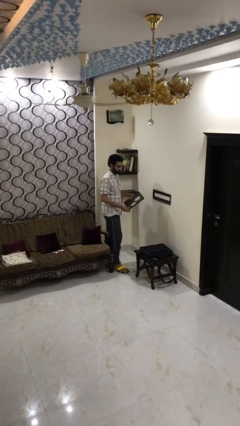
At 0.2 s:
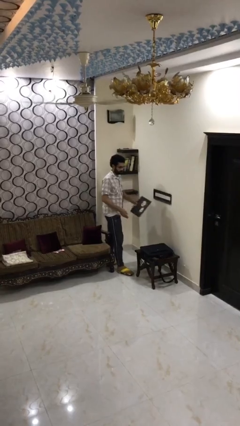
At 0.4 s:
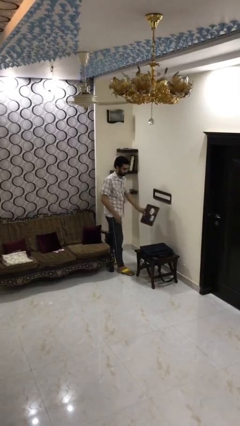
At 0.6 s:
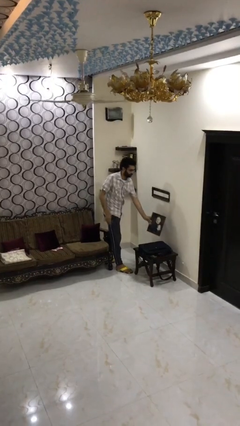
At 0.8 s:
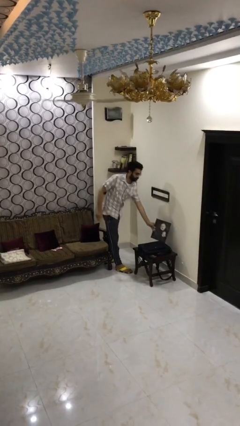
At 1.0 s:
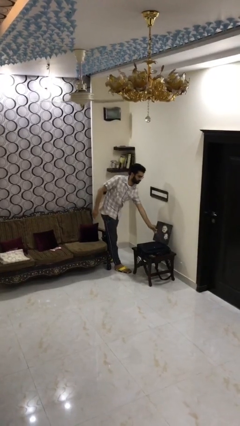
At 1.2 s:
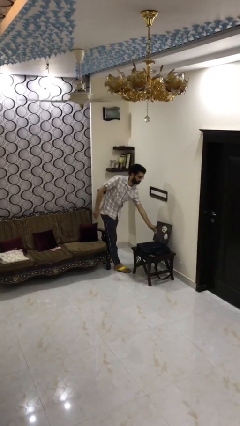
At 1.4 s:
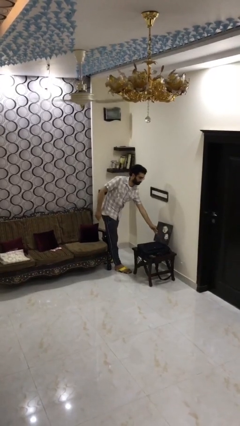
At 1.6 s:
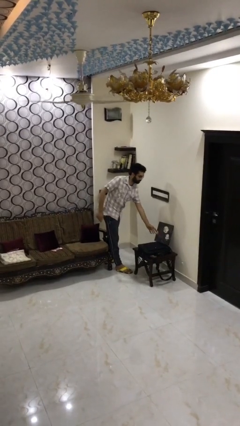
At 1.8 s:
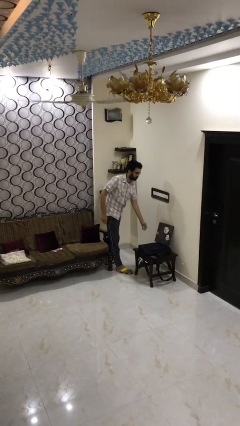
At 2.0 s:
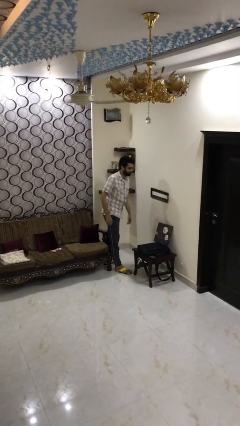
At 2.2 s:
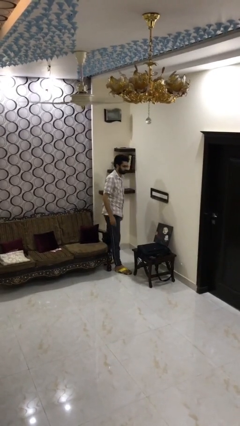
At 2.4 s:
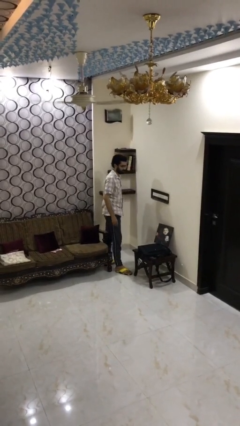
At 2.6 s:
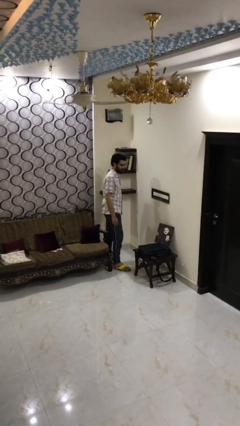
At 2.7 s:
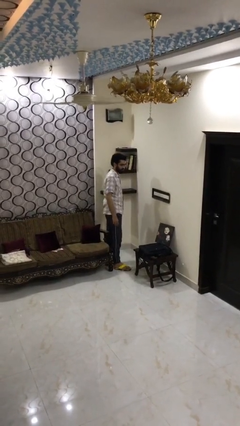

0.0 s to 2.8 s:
person puts down object on table

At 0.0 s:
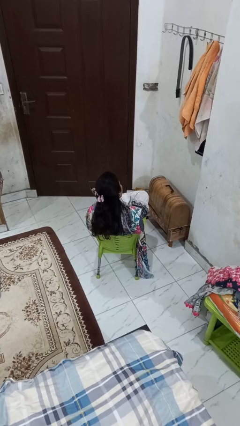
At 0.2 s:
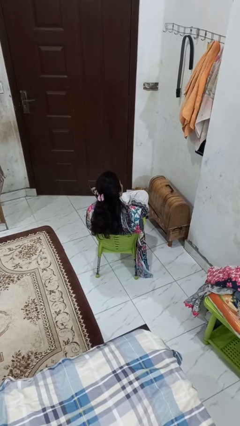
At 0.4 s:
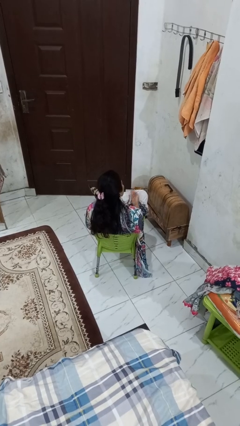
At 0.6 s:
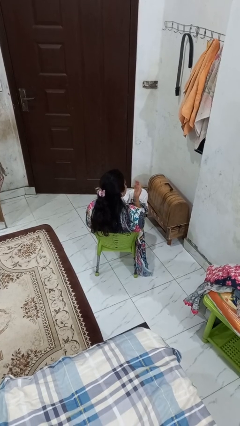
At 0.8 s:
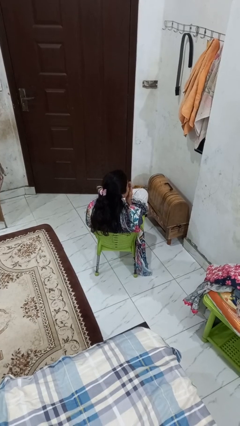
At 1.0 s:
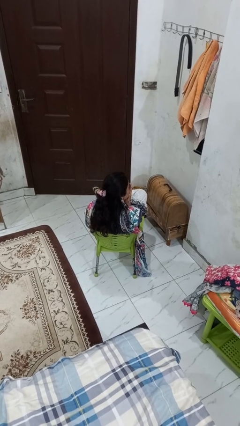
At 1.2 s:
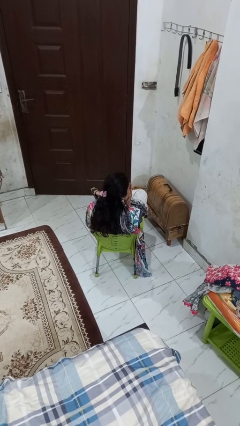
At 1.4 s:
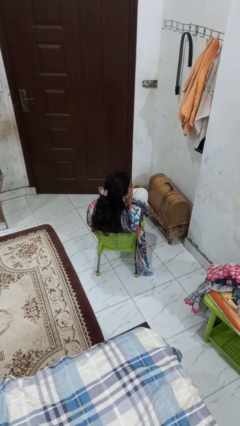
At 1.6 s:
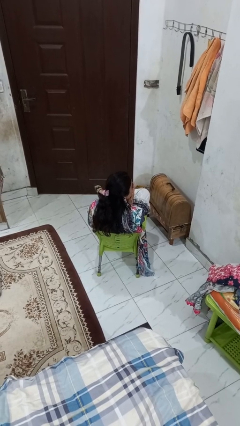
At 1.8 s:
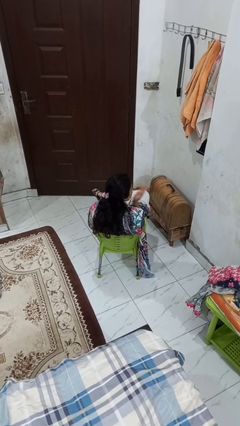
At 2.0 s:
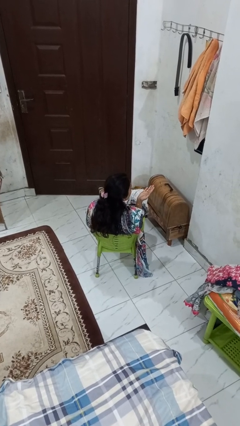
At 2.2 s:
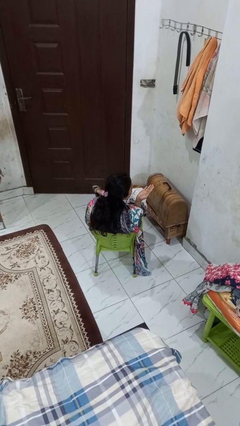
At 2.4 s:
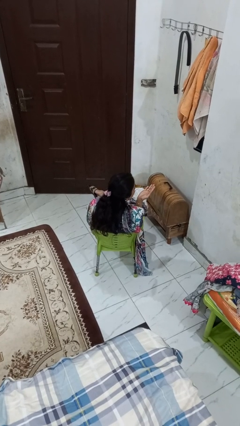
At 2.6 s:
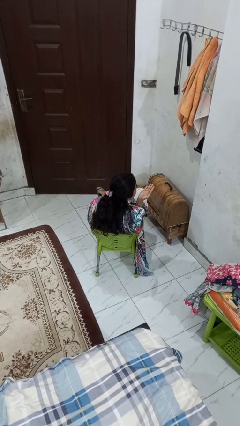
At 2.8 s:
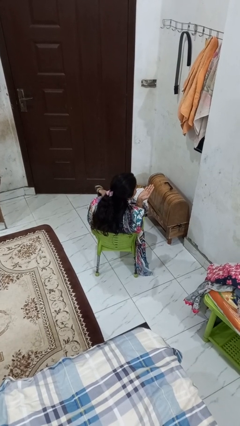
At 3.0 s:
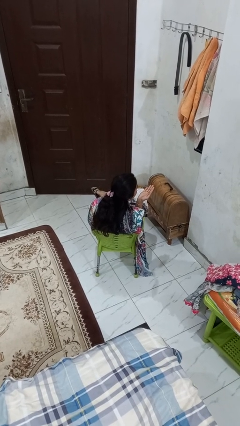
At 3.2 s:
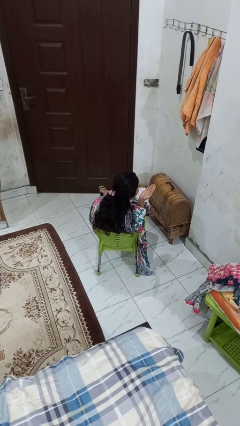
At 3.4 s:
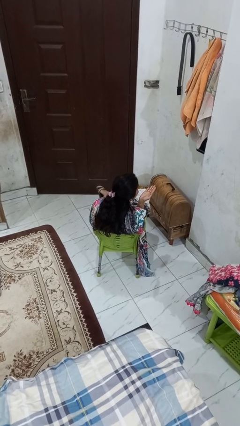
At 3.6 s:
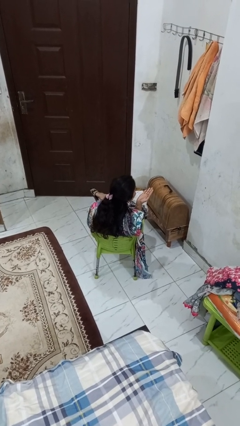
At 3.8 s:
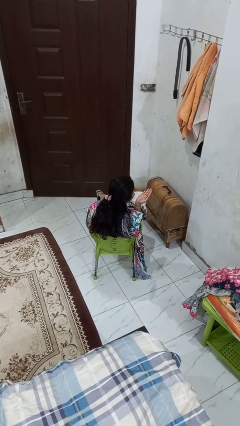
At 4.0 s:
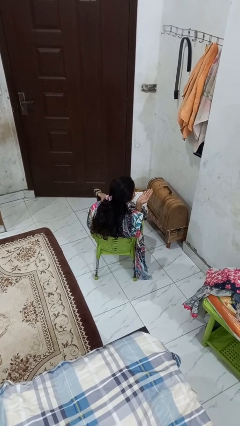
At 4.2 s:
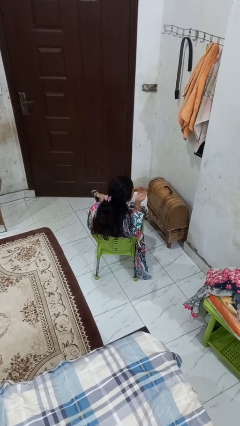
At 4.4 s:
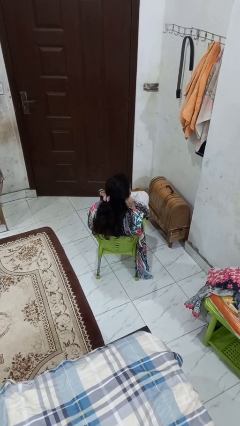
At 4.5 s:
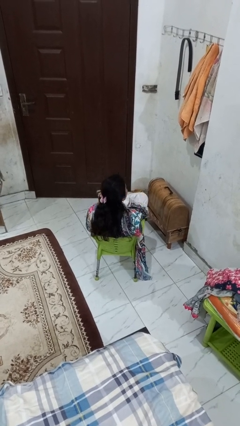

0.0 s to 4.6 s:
person gestures blow kiss

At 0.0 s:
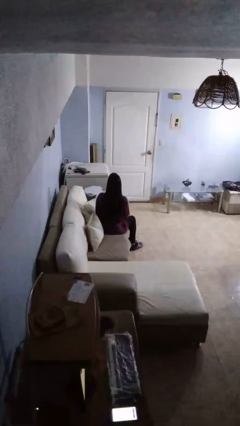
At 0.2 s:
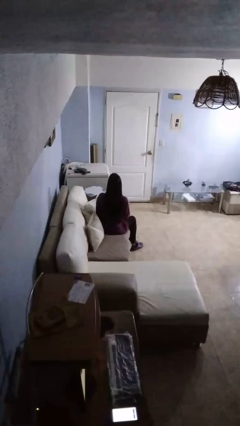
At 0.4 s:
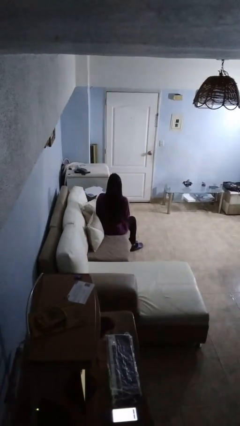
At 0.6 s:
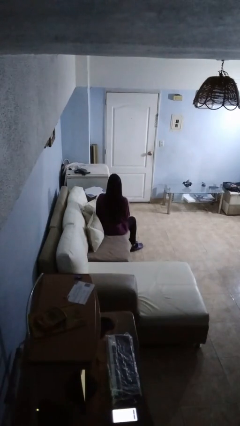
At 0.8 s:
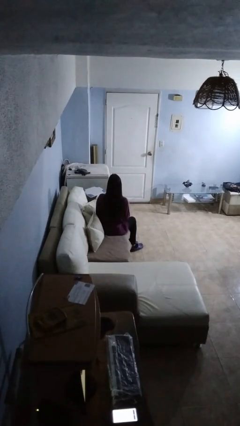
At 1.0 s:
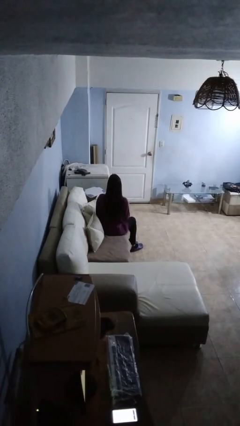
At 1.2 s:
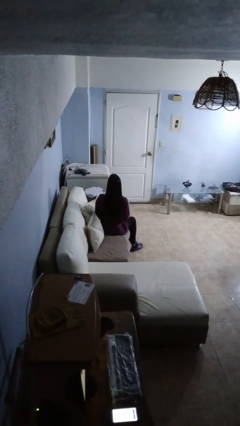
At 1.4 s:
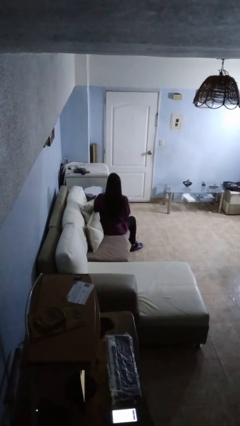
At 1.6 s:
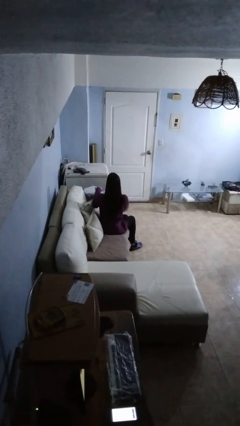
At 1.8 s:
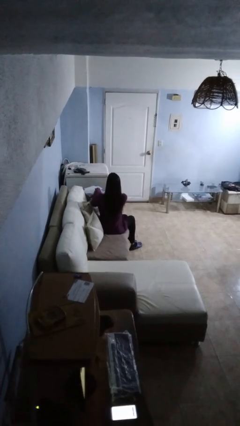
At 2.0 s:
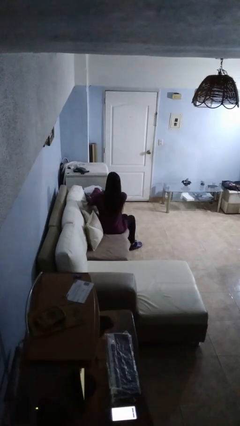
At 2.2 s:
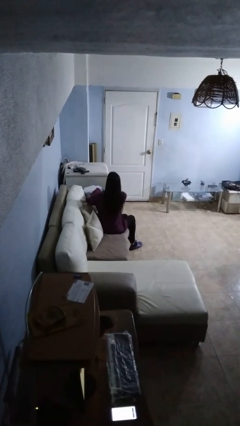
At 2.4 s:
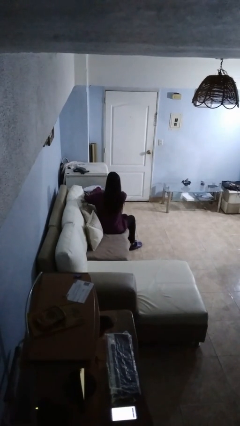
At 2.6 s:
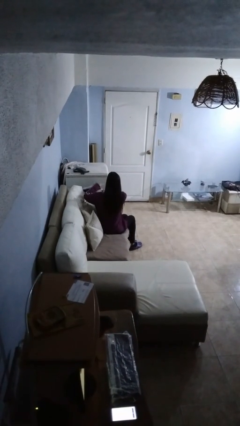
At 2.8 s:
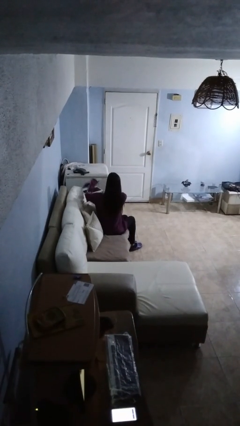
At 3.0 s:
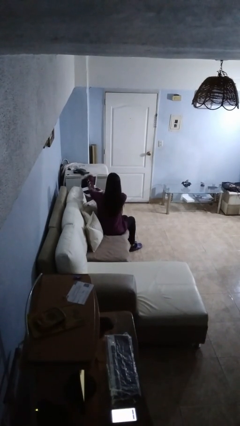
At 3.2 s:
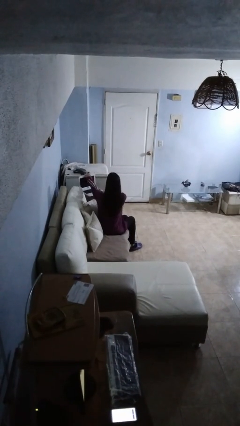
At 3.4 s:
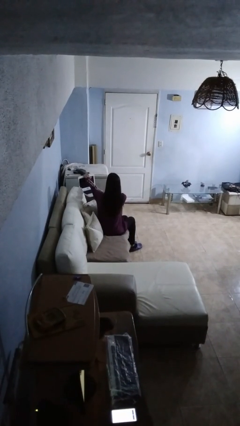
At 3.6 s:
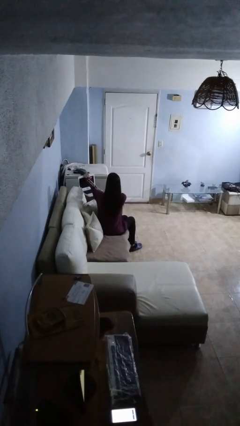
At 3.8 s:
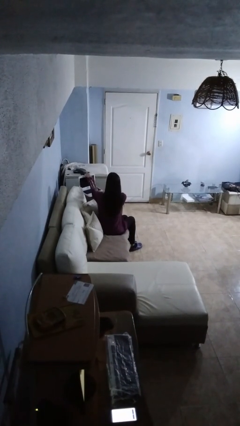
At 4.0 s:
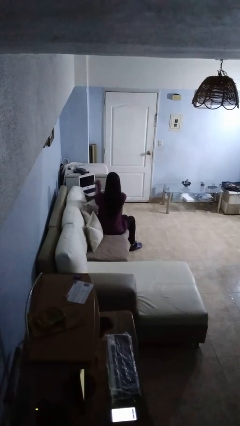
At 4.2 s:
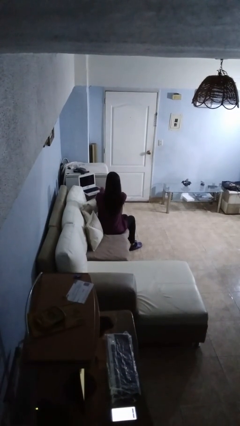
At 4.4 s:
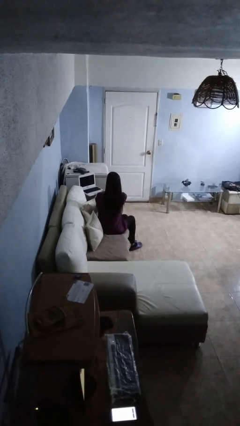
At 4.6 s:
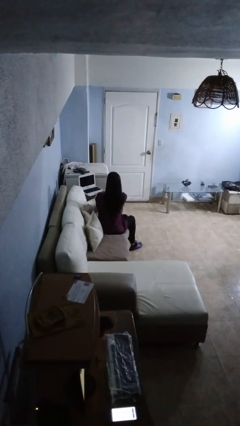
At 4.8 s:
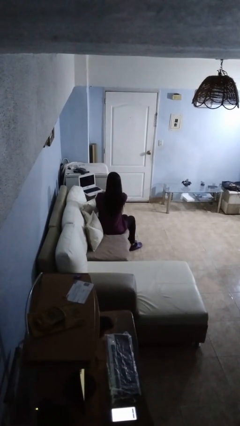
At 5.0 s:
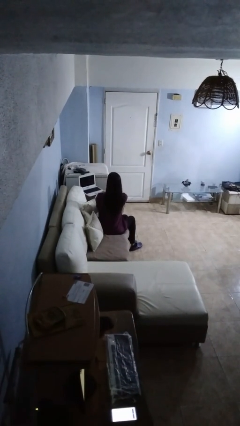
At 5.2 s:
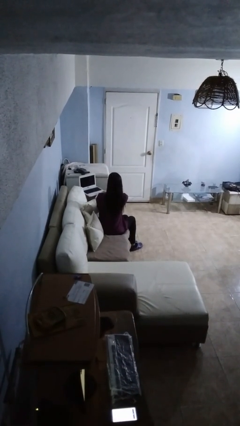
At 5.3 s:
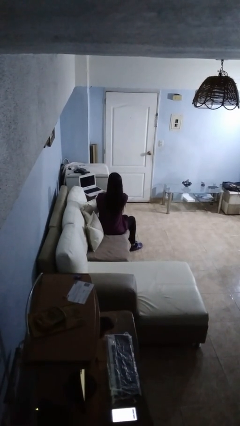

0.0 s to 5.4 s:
person opens laptop

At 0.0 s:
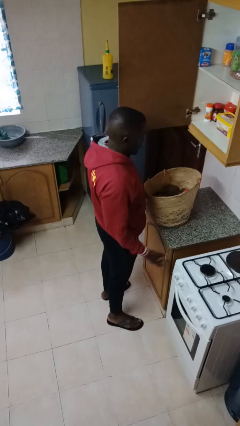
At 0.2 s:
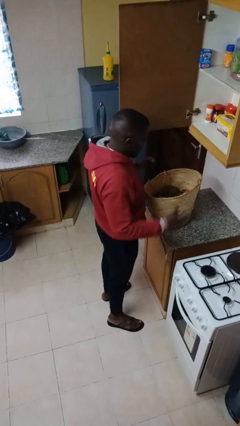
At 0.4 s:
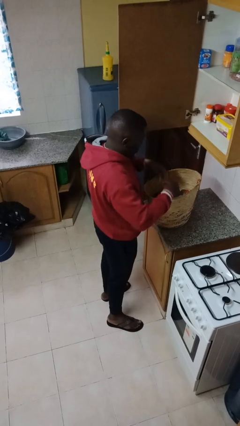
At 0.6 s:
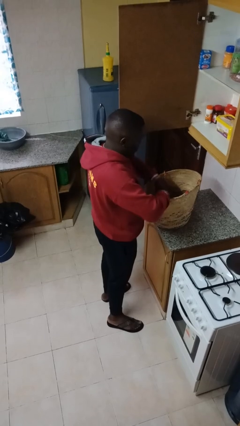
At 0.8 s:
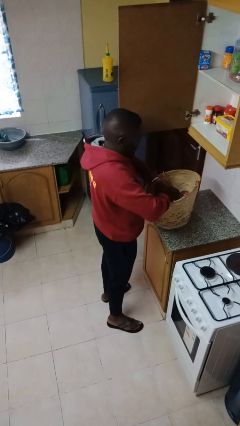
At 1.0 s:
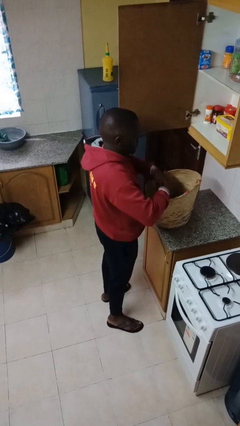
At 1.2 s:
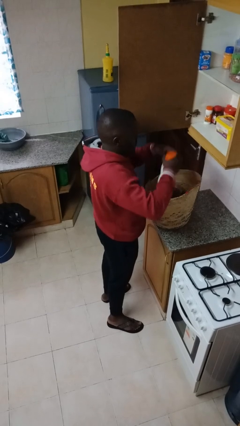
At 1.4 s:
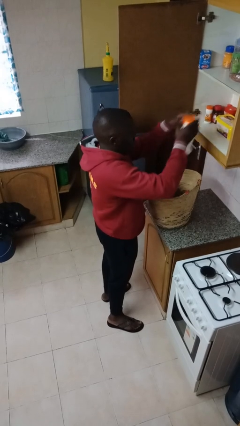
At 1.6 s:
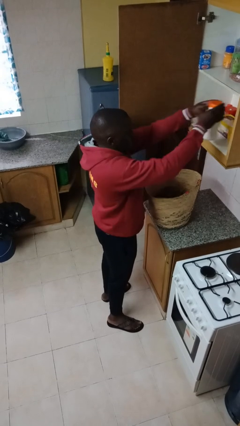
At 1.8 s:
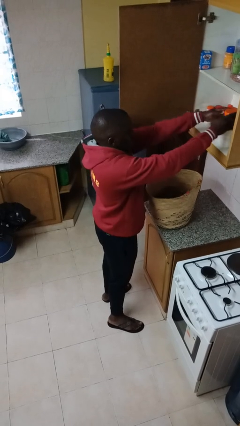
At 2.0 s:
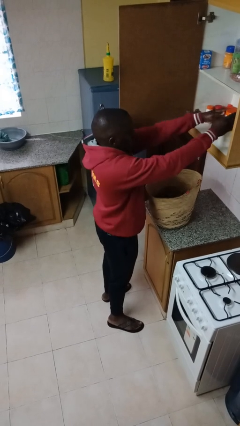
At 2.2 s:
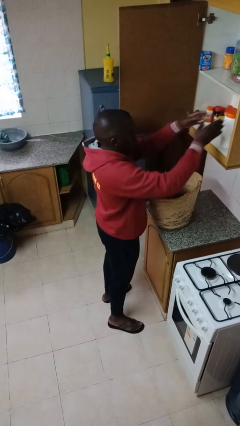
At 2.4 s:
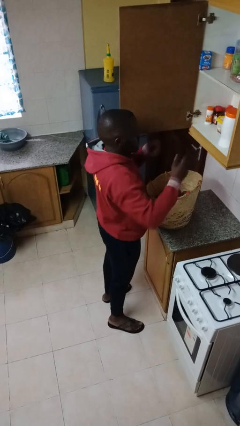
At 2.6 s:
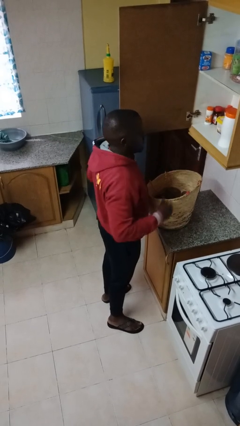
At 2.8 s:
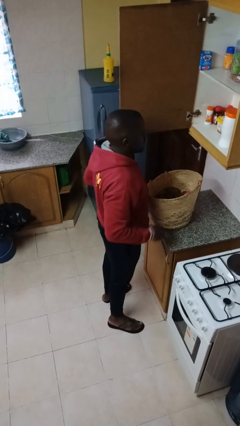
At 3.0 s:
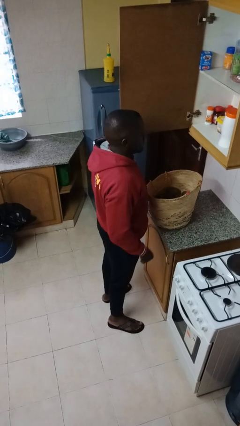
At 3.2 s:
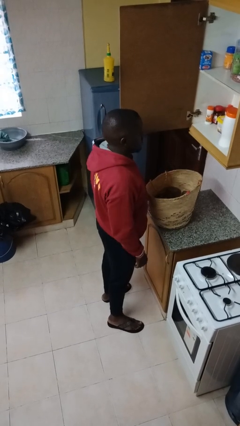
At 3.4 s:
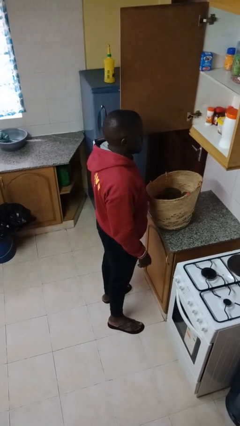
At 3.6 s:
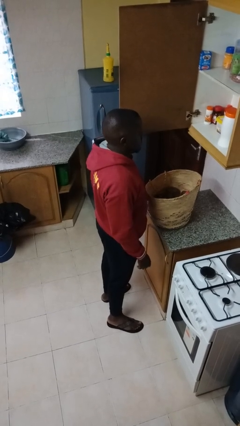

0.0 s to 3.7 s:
person loads groceries into cabinet

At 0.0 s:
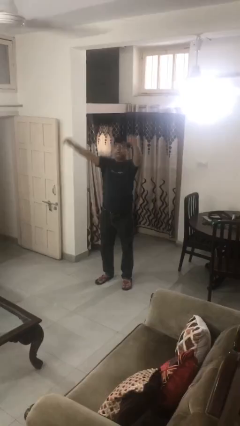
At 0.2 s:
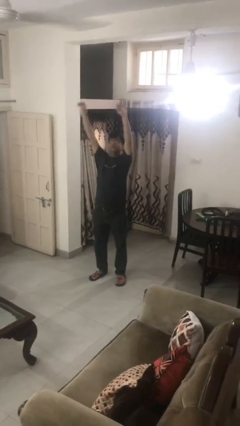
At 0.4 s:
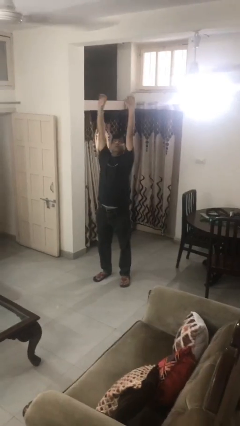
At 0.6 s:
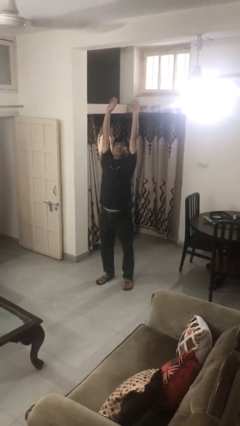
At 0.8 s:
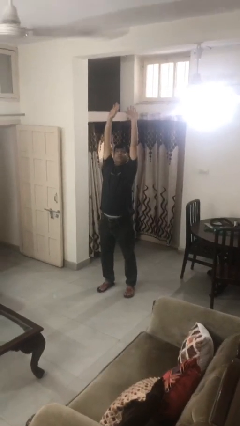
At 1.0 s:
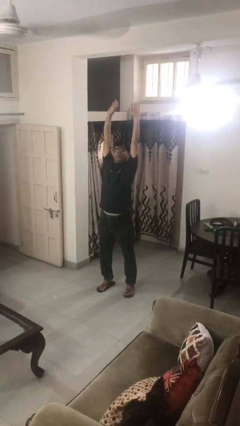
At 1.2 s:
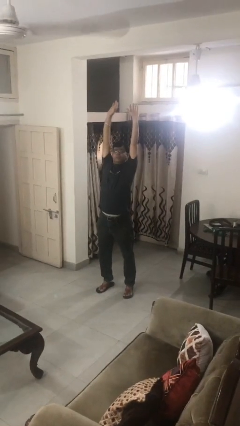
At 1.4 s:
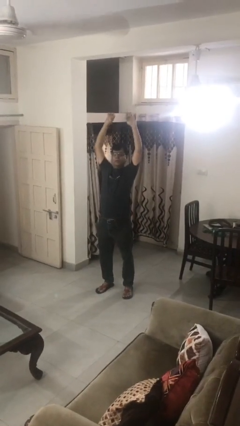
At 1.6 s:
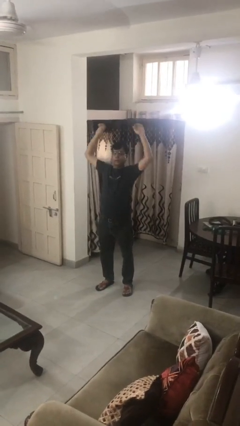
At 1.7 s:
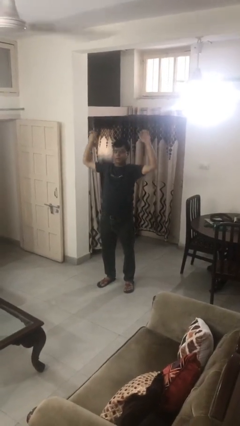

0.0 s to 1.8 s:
person stretches arms over head
